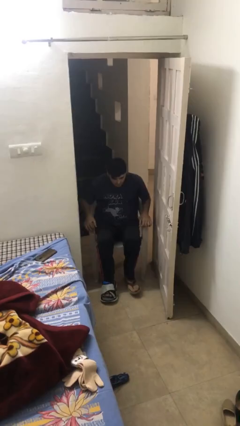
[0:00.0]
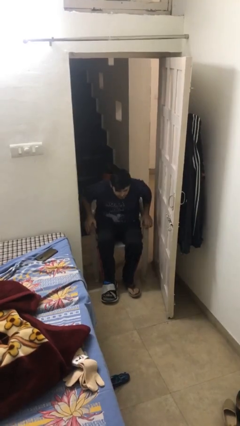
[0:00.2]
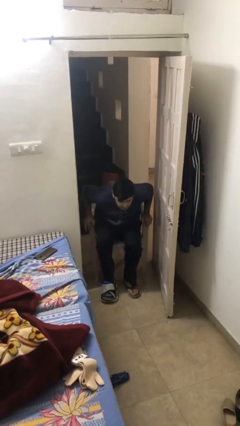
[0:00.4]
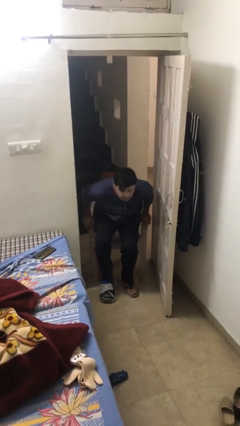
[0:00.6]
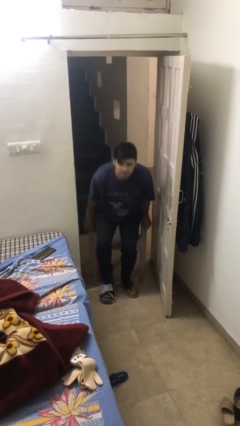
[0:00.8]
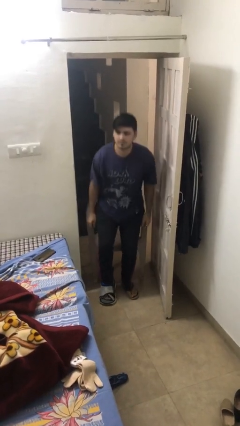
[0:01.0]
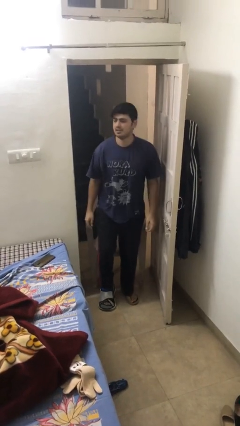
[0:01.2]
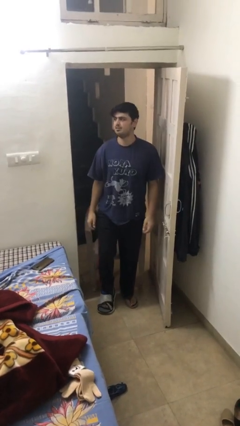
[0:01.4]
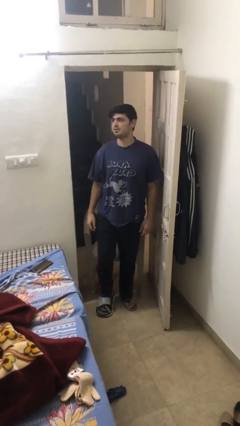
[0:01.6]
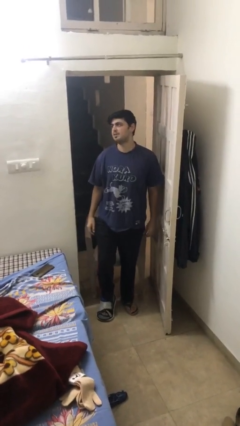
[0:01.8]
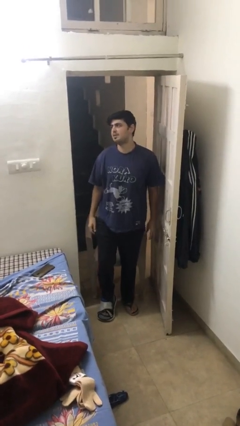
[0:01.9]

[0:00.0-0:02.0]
person stands up

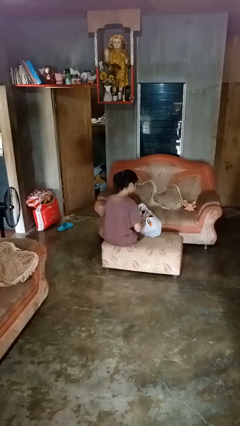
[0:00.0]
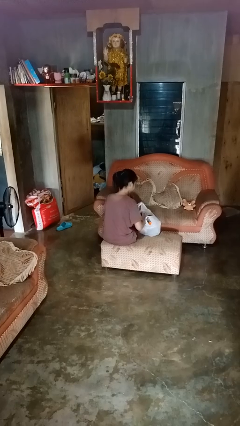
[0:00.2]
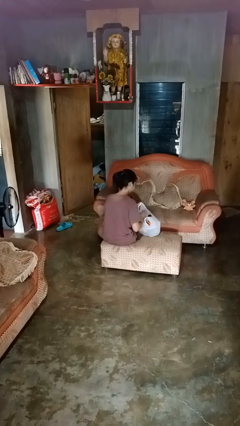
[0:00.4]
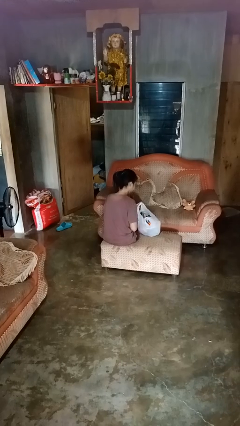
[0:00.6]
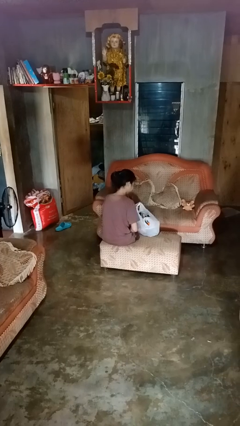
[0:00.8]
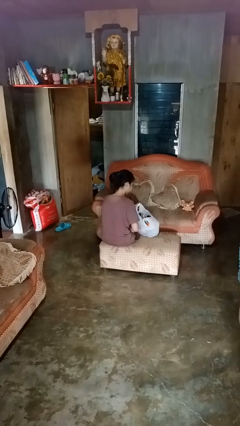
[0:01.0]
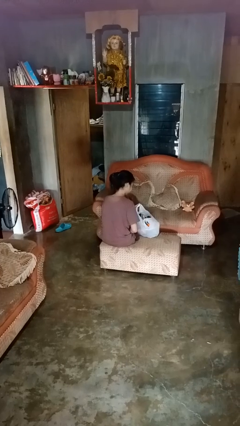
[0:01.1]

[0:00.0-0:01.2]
person puts object into bag

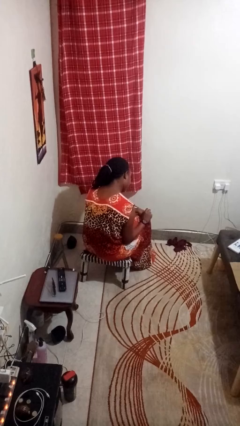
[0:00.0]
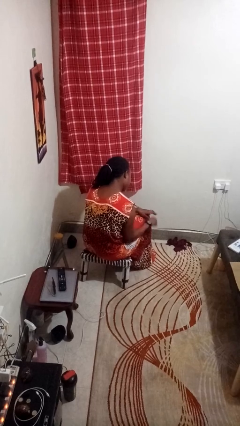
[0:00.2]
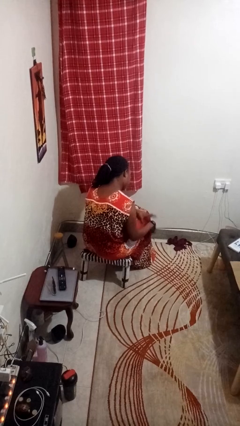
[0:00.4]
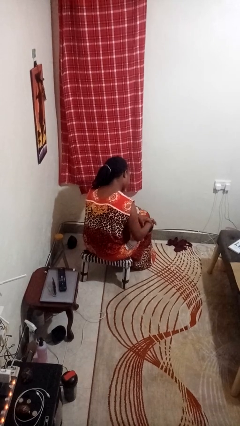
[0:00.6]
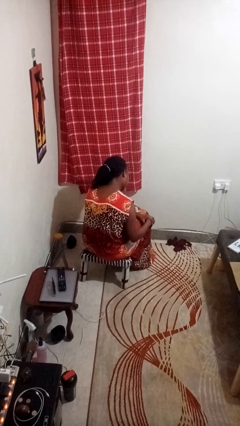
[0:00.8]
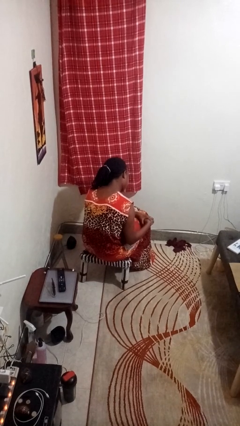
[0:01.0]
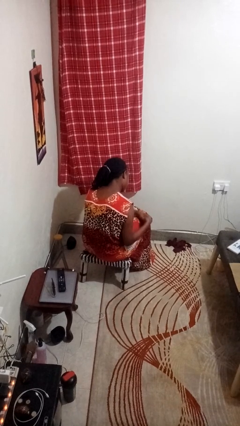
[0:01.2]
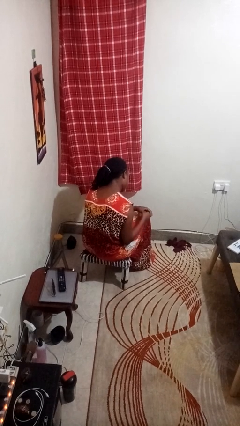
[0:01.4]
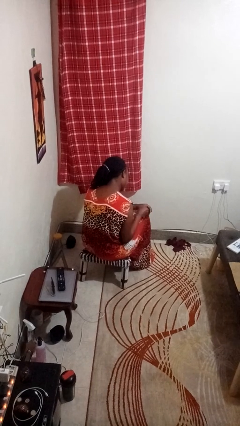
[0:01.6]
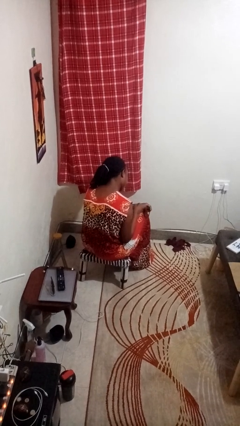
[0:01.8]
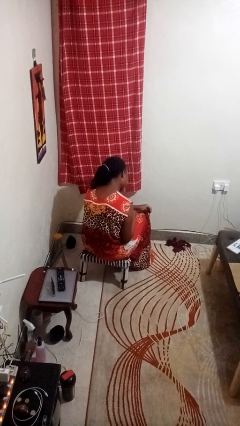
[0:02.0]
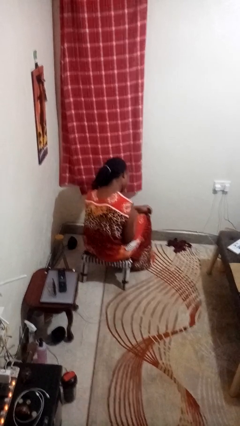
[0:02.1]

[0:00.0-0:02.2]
person takes off wristwatch

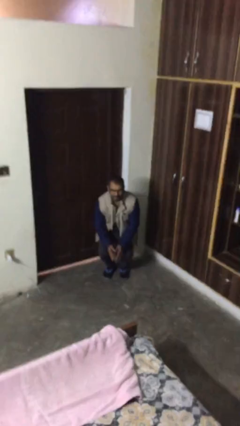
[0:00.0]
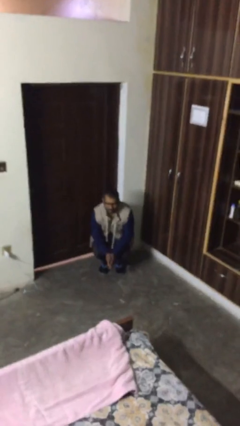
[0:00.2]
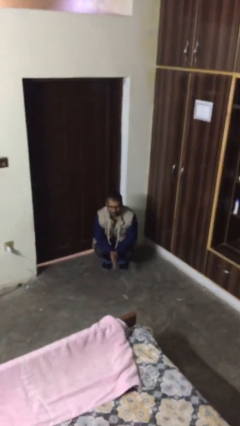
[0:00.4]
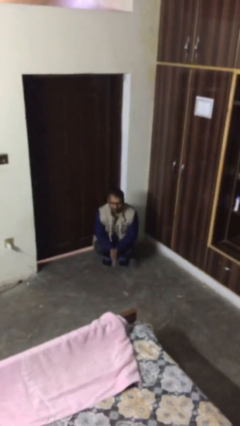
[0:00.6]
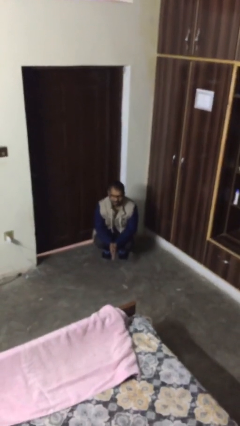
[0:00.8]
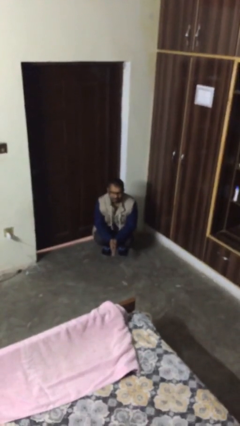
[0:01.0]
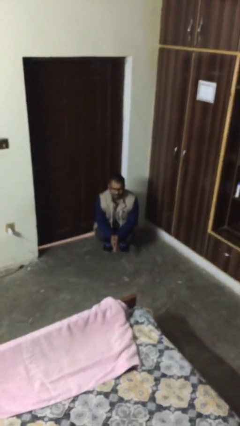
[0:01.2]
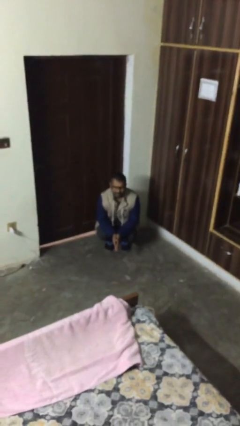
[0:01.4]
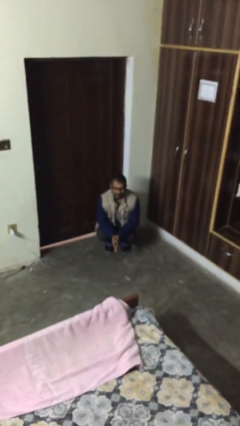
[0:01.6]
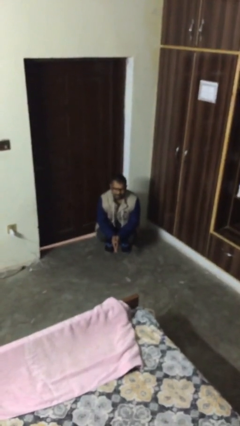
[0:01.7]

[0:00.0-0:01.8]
person sits down

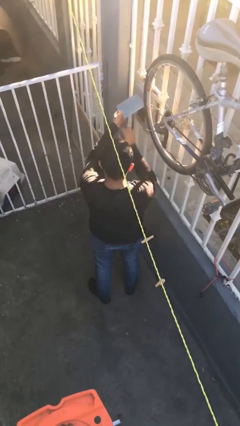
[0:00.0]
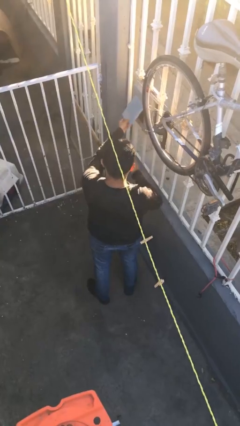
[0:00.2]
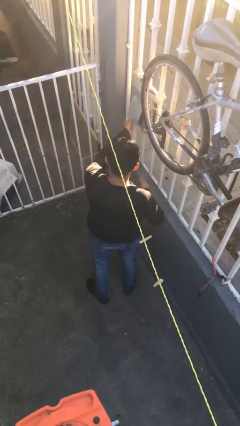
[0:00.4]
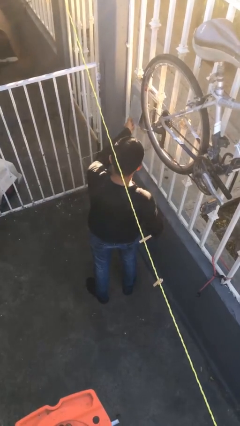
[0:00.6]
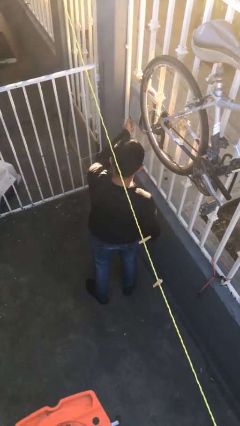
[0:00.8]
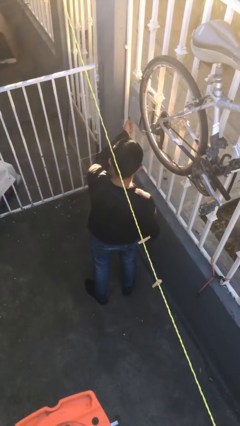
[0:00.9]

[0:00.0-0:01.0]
person closes mailbox

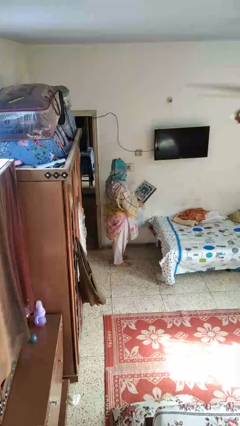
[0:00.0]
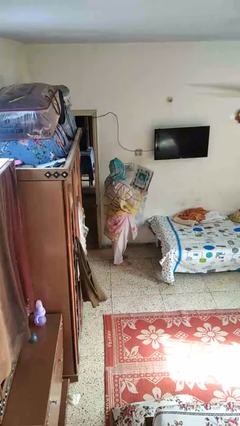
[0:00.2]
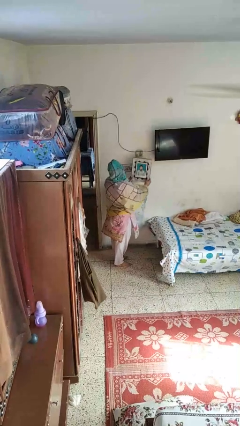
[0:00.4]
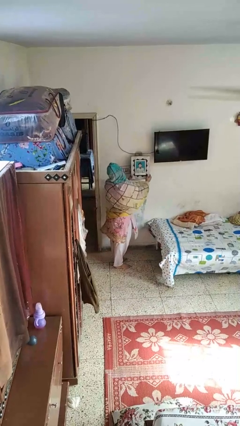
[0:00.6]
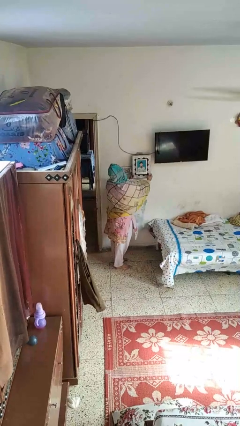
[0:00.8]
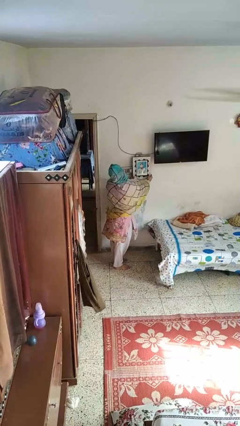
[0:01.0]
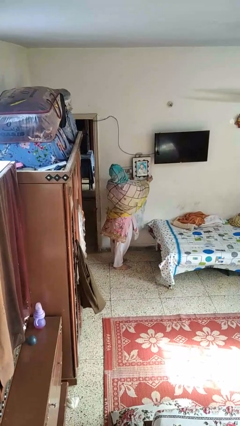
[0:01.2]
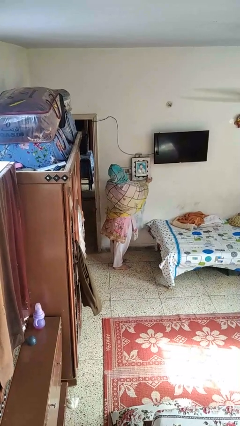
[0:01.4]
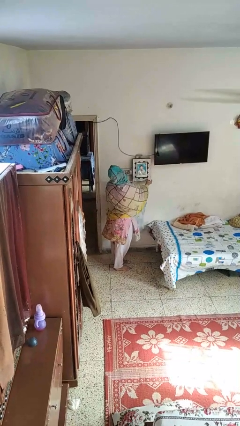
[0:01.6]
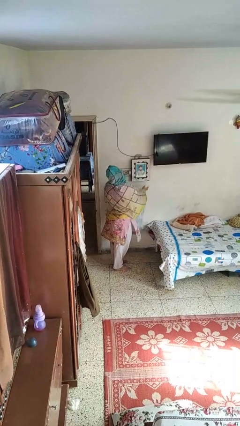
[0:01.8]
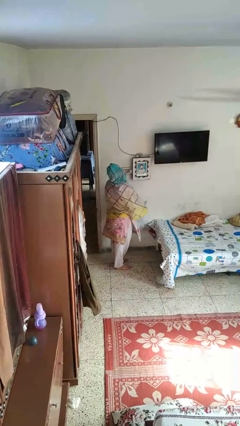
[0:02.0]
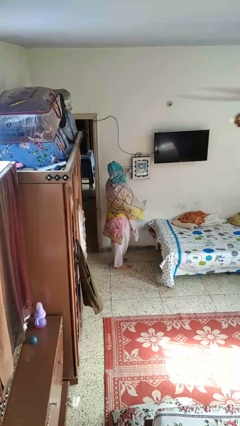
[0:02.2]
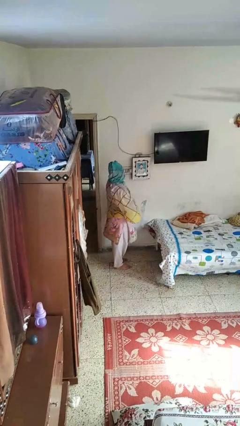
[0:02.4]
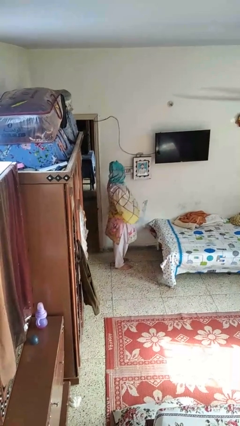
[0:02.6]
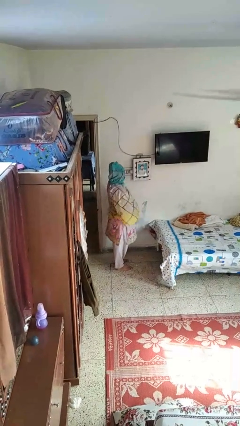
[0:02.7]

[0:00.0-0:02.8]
person puts up picture frame

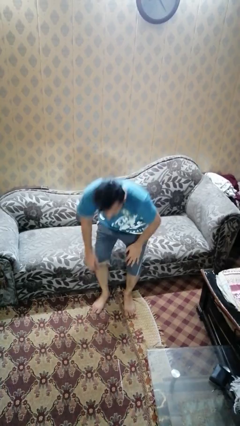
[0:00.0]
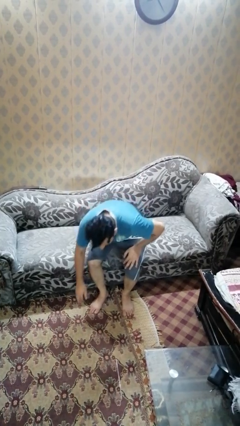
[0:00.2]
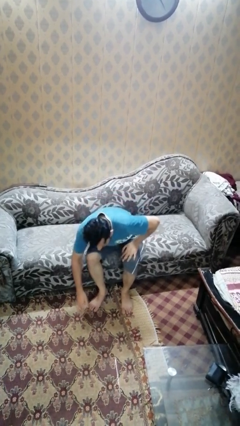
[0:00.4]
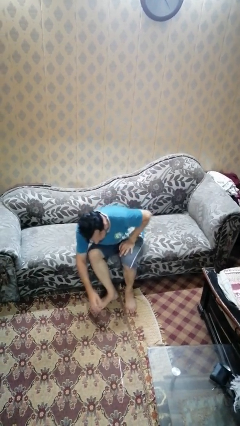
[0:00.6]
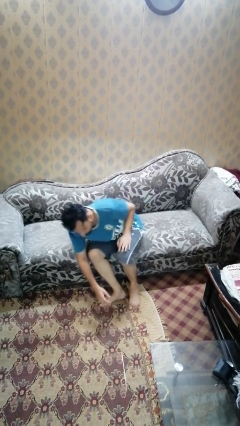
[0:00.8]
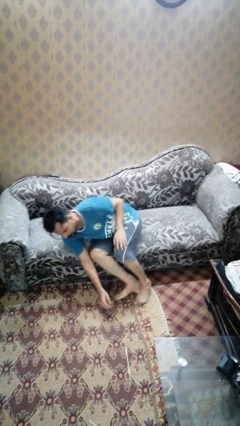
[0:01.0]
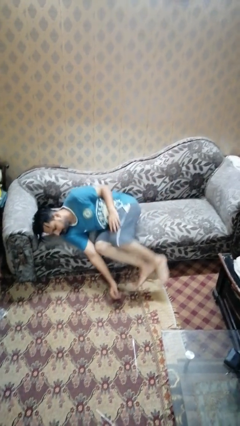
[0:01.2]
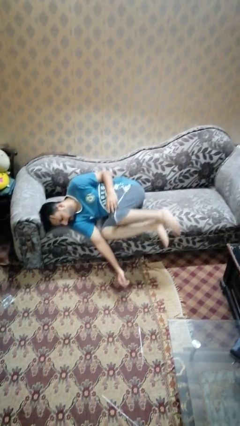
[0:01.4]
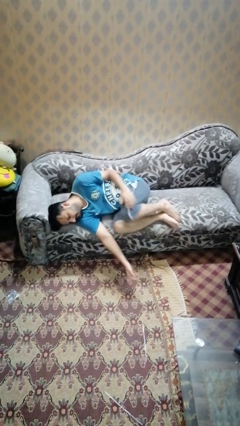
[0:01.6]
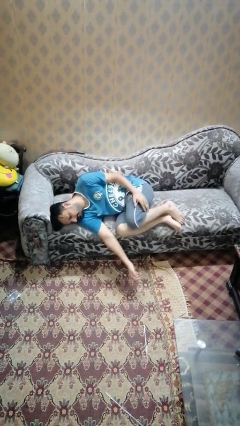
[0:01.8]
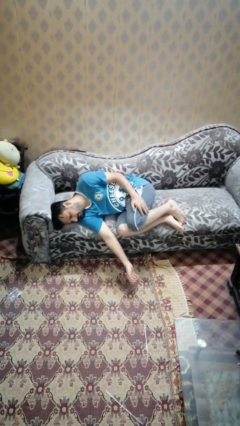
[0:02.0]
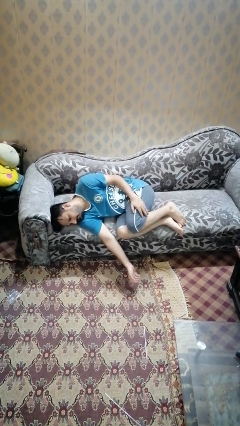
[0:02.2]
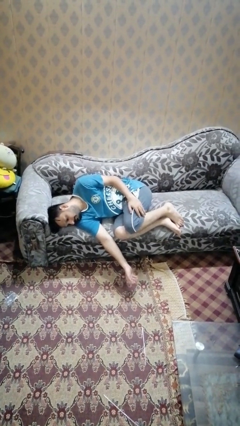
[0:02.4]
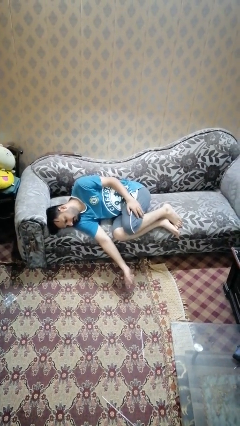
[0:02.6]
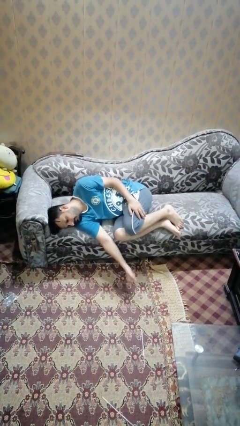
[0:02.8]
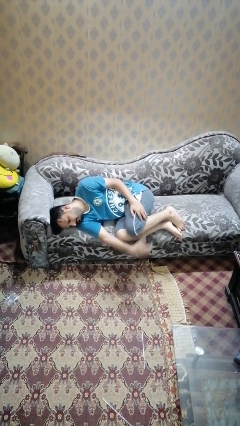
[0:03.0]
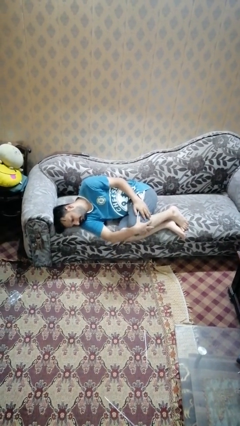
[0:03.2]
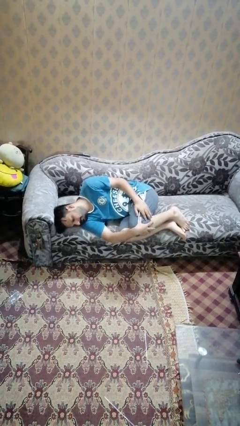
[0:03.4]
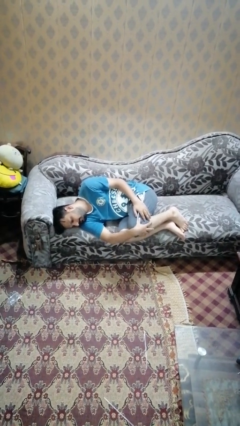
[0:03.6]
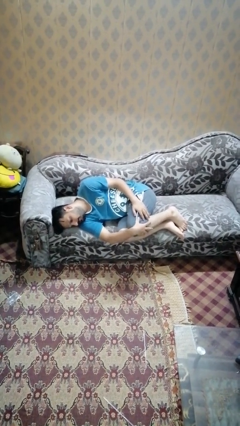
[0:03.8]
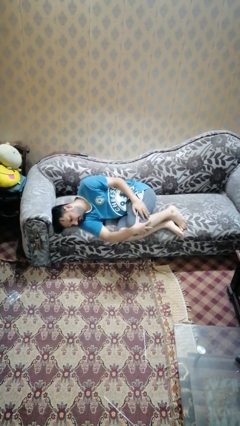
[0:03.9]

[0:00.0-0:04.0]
person lies down on couch

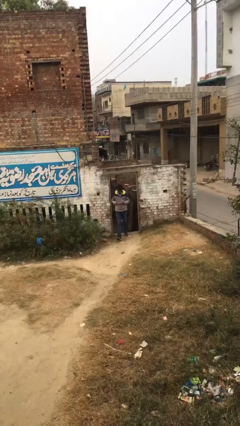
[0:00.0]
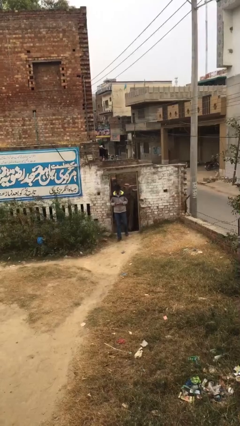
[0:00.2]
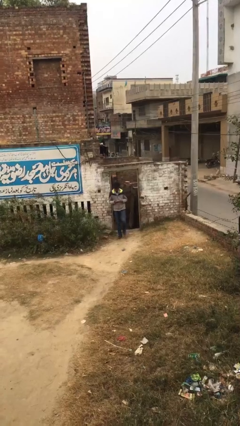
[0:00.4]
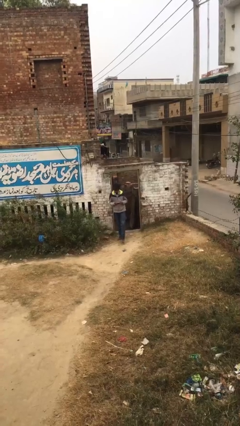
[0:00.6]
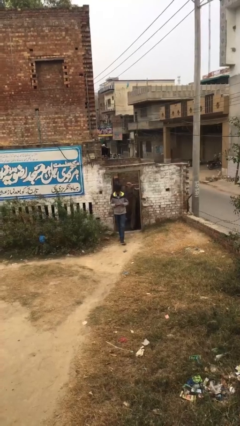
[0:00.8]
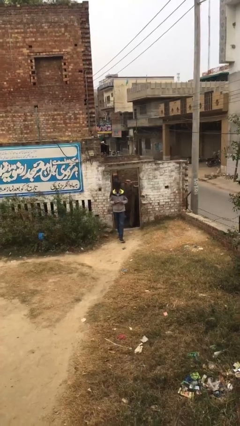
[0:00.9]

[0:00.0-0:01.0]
person exits scene through structure

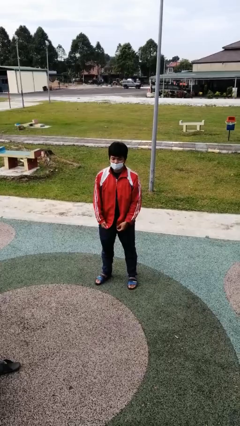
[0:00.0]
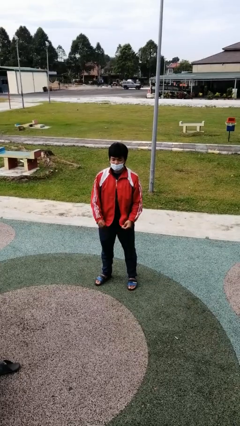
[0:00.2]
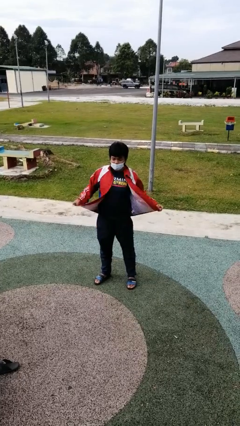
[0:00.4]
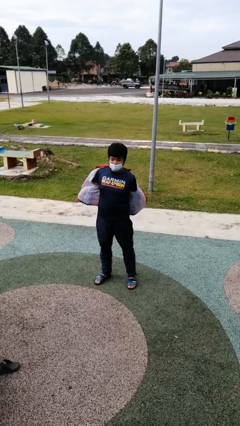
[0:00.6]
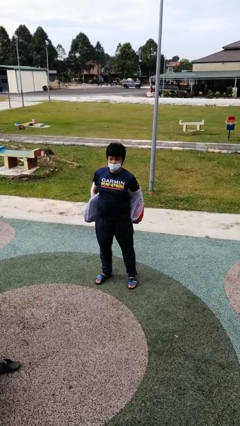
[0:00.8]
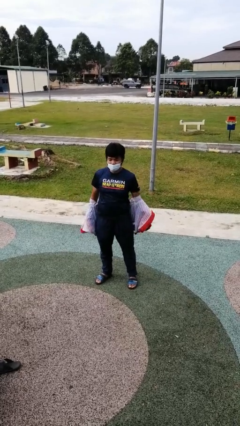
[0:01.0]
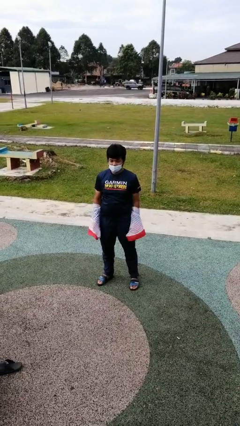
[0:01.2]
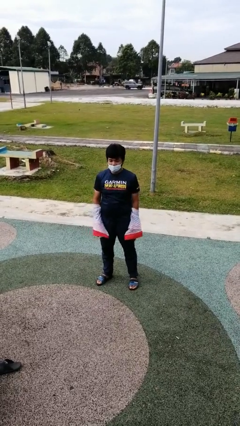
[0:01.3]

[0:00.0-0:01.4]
person takes off jacket
